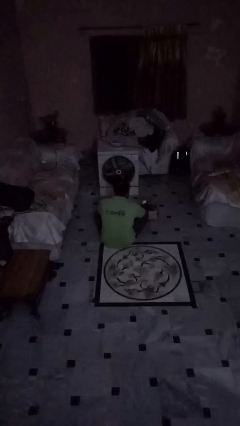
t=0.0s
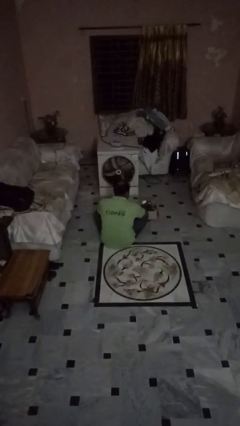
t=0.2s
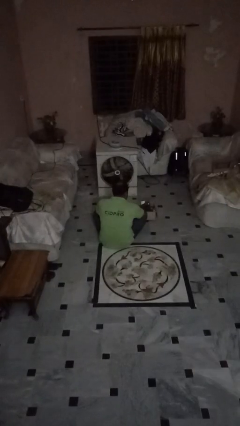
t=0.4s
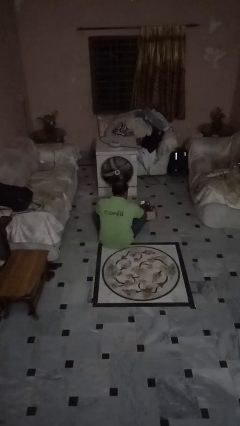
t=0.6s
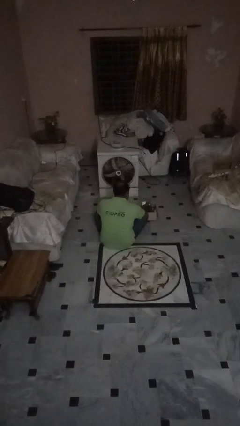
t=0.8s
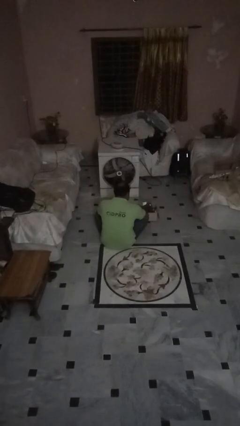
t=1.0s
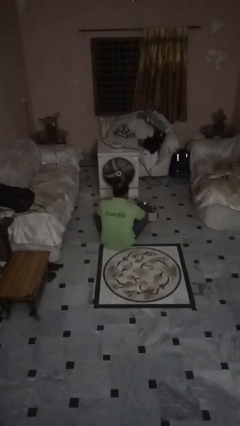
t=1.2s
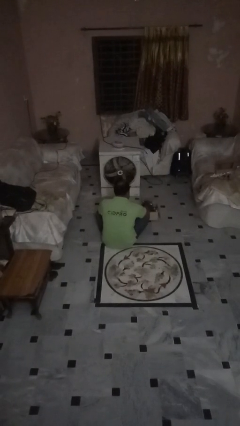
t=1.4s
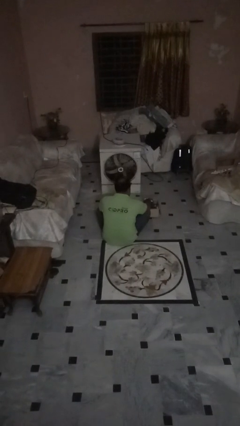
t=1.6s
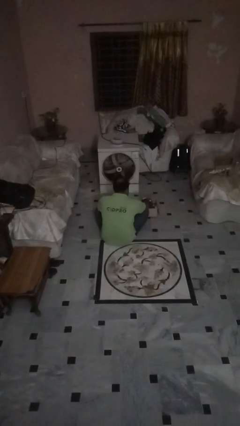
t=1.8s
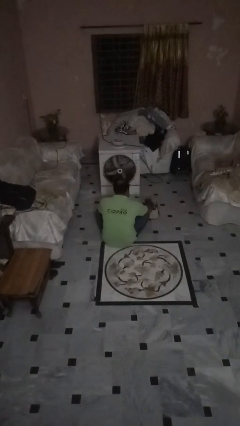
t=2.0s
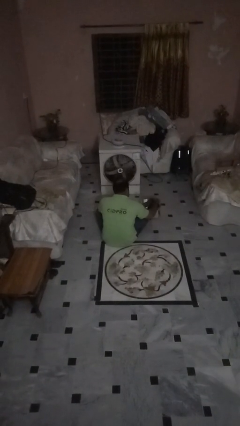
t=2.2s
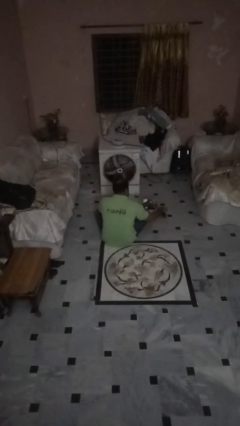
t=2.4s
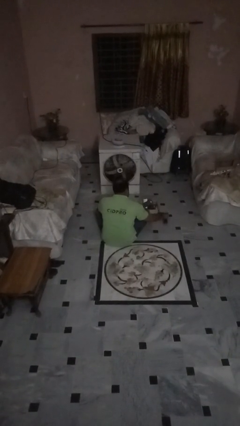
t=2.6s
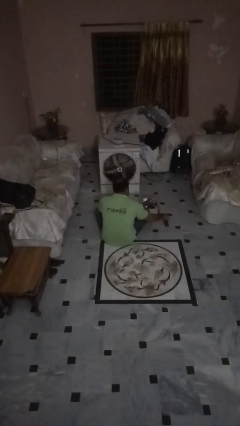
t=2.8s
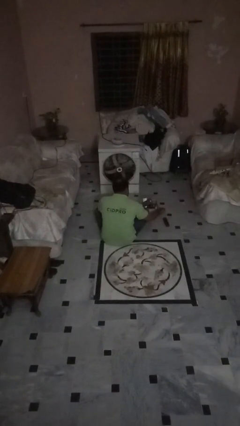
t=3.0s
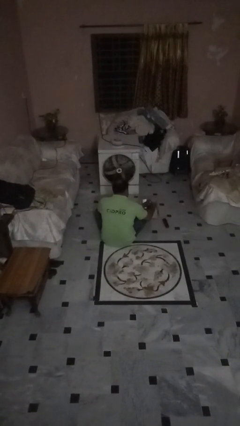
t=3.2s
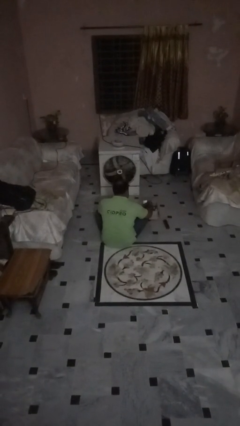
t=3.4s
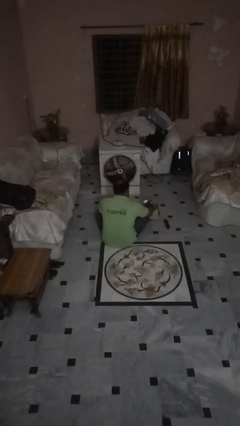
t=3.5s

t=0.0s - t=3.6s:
person unloads box onto floor

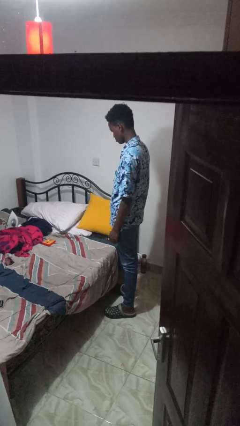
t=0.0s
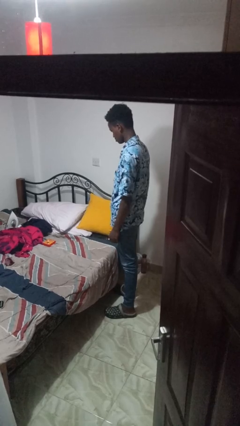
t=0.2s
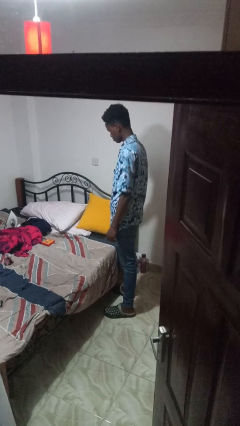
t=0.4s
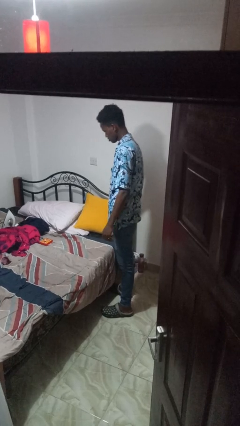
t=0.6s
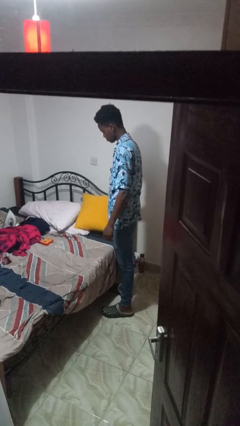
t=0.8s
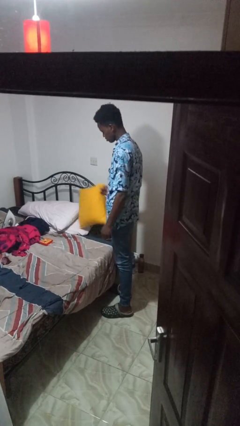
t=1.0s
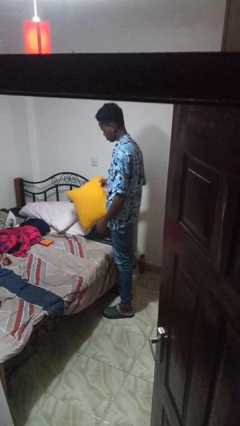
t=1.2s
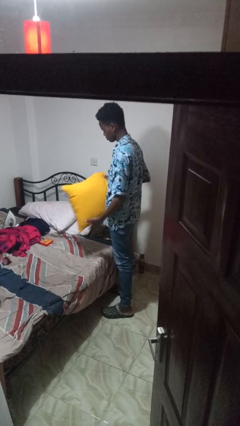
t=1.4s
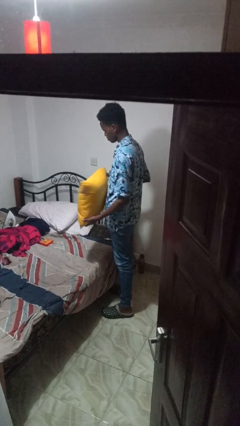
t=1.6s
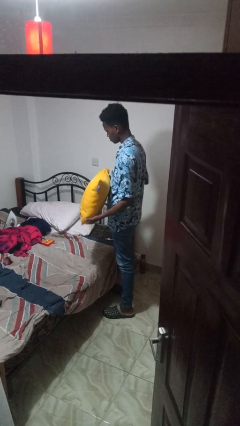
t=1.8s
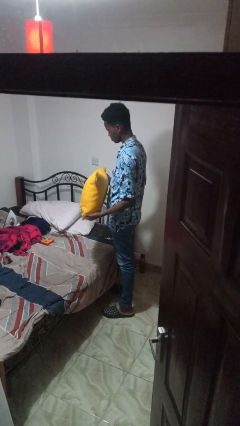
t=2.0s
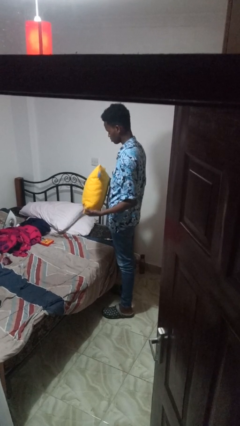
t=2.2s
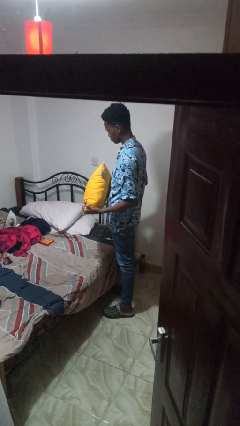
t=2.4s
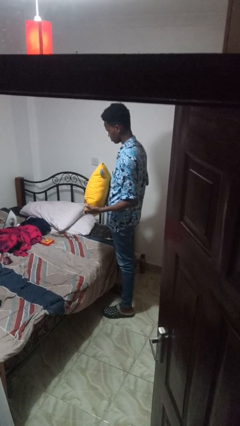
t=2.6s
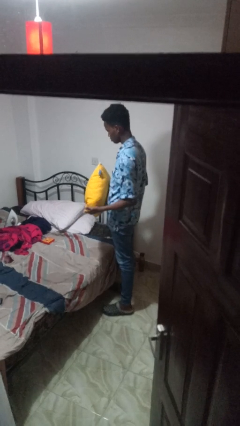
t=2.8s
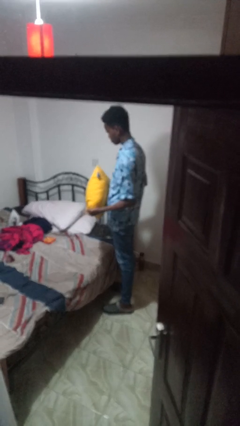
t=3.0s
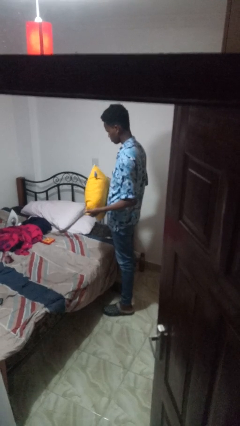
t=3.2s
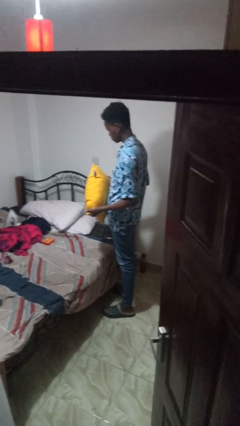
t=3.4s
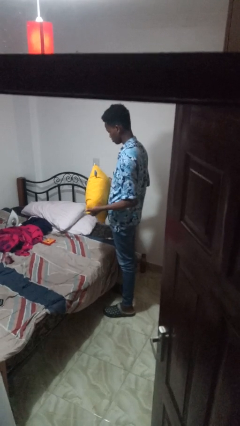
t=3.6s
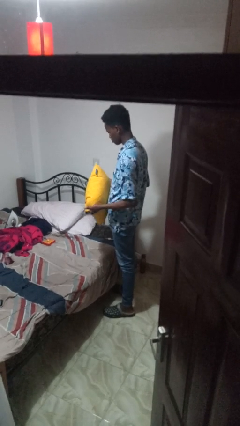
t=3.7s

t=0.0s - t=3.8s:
person picks up object from bed

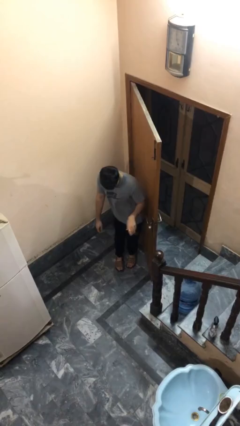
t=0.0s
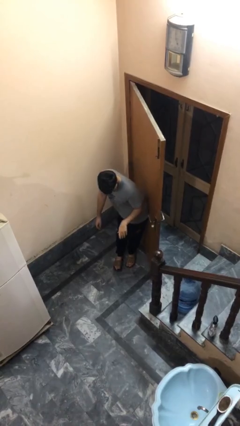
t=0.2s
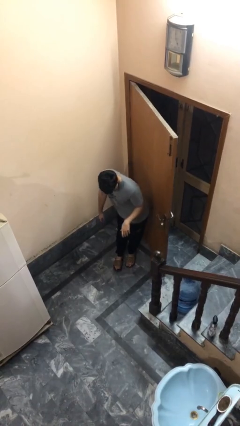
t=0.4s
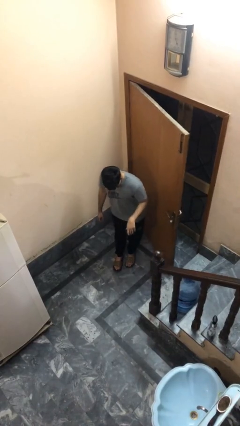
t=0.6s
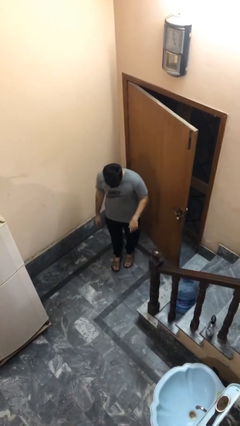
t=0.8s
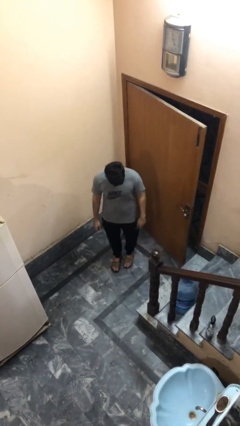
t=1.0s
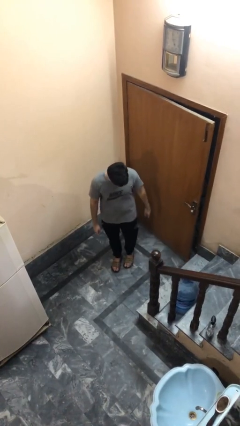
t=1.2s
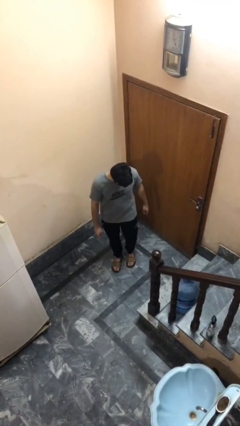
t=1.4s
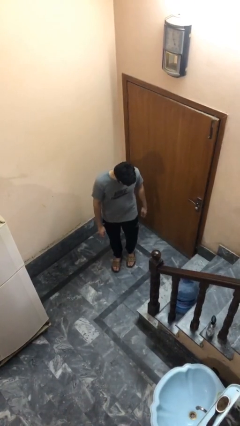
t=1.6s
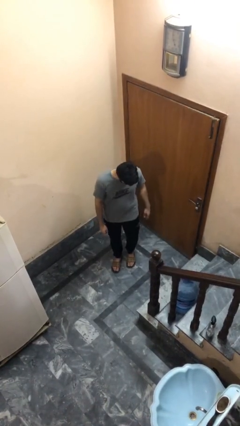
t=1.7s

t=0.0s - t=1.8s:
person closes door with hip

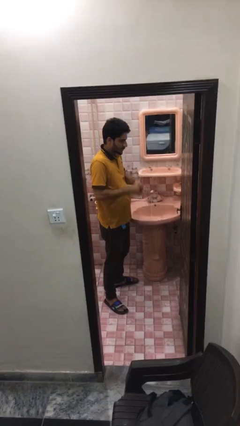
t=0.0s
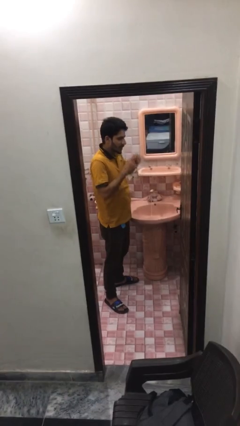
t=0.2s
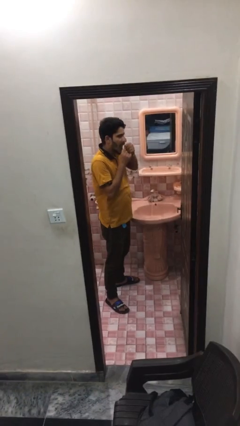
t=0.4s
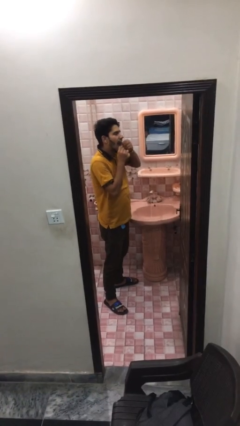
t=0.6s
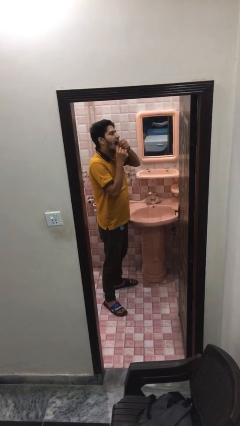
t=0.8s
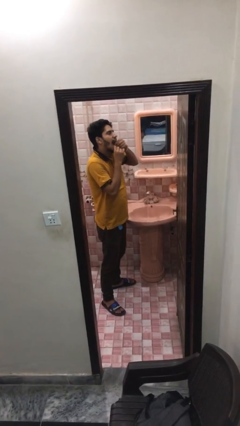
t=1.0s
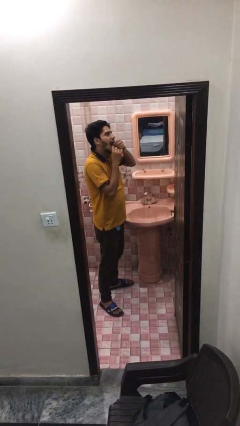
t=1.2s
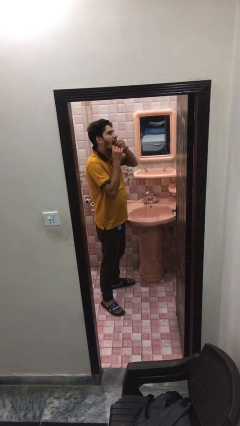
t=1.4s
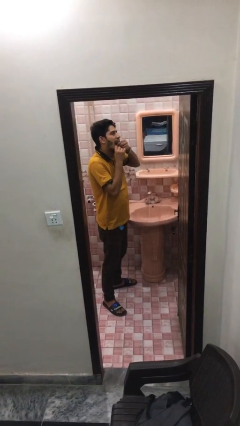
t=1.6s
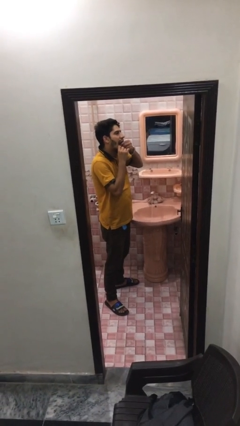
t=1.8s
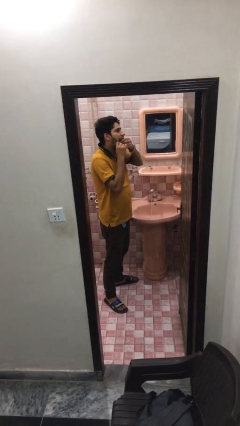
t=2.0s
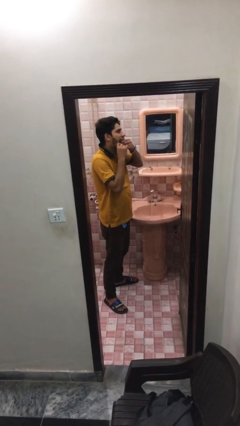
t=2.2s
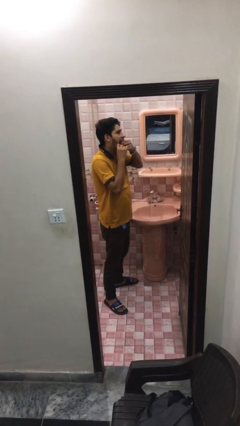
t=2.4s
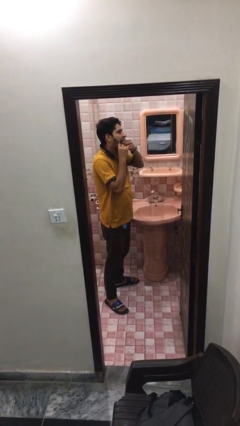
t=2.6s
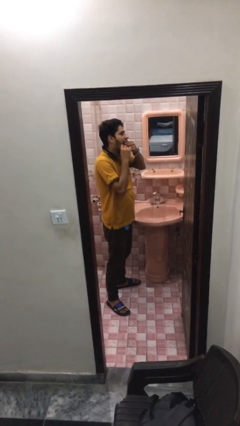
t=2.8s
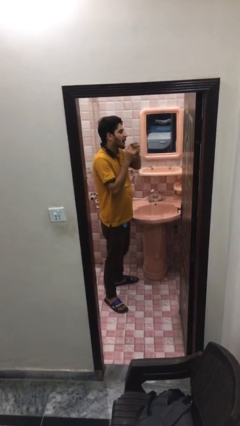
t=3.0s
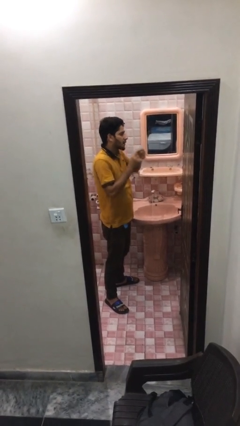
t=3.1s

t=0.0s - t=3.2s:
person flosses

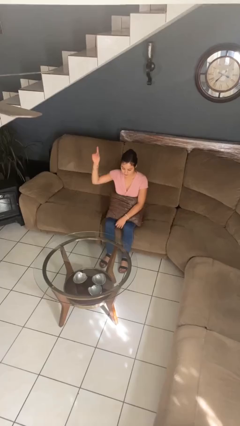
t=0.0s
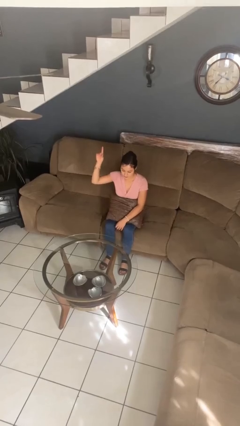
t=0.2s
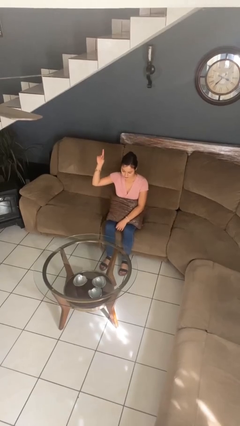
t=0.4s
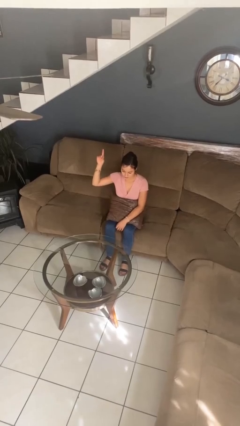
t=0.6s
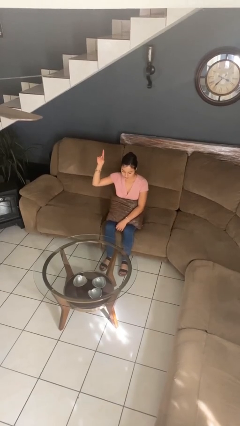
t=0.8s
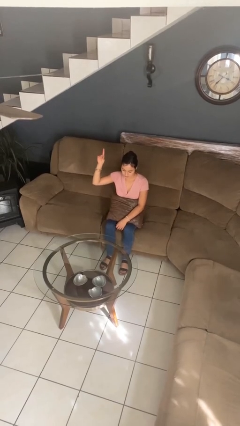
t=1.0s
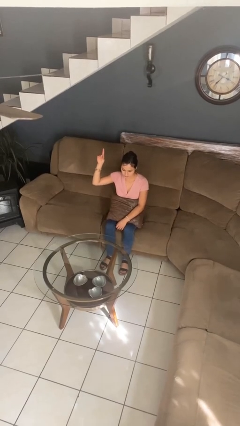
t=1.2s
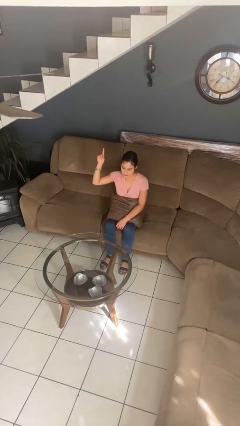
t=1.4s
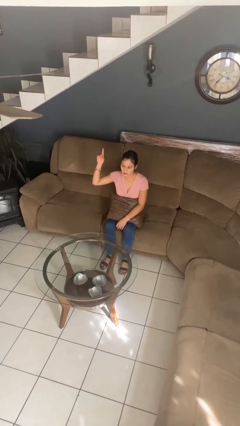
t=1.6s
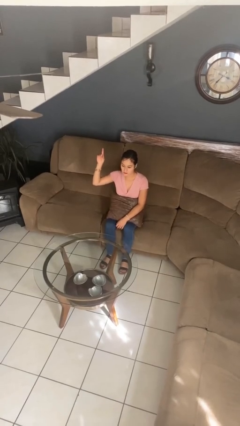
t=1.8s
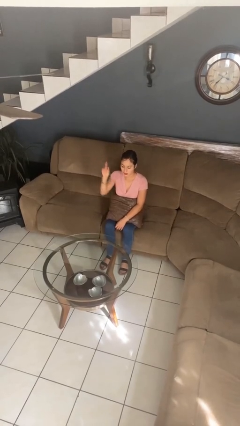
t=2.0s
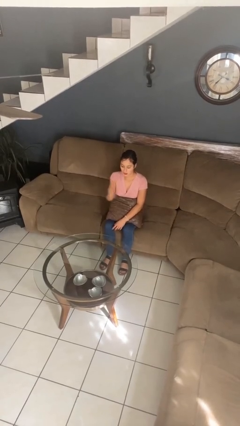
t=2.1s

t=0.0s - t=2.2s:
person gestures number one

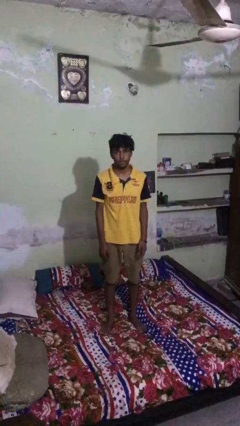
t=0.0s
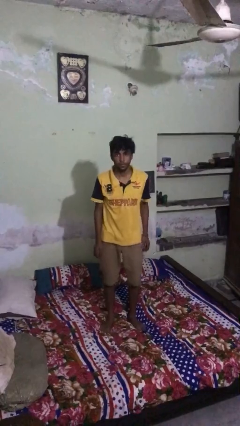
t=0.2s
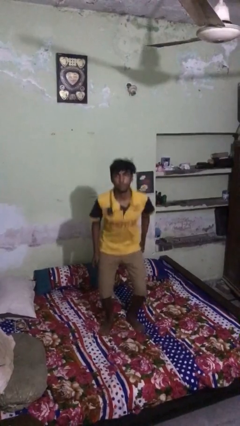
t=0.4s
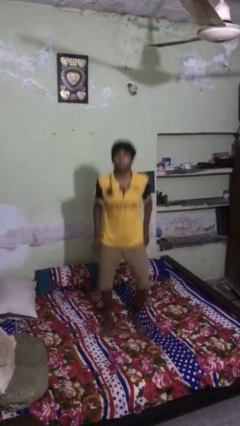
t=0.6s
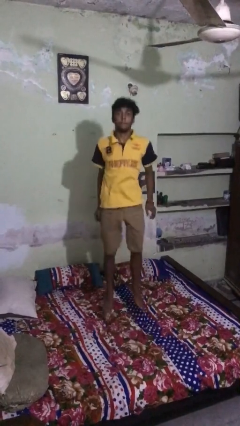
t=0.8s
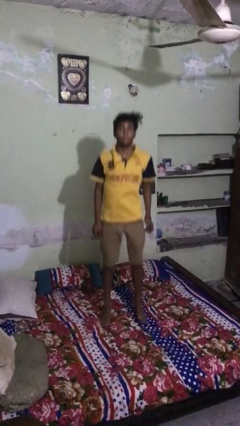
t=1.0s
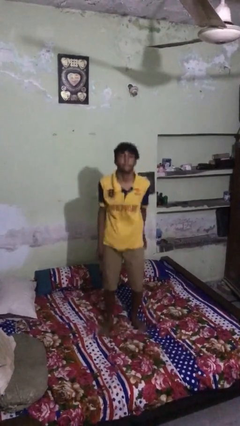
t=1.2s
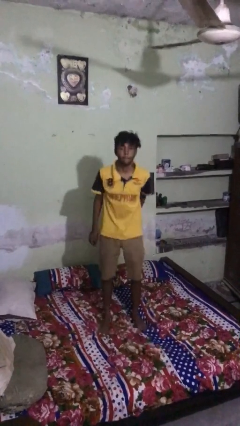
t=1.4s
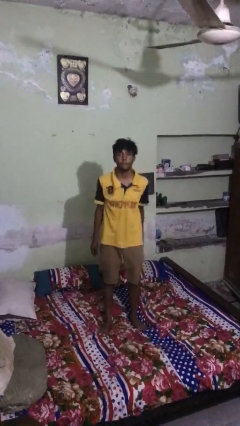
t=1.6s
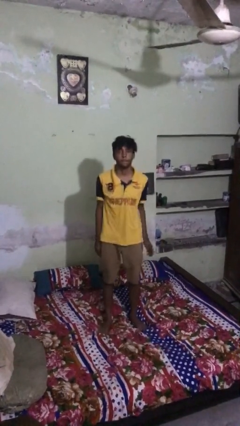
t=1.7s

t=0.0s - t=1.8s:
person jumps on bed

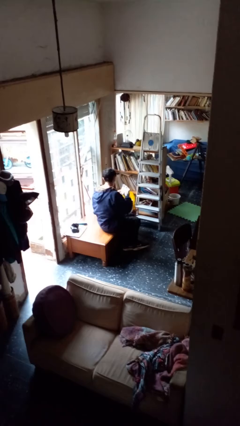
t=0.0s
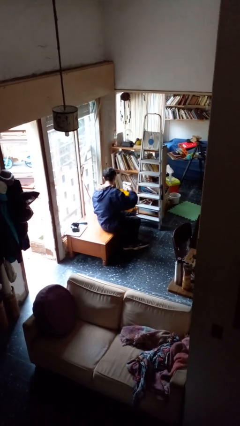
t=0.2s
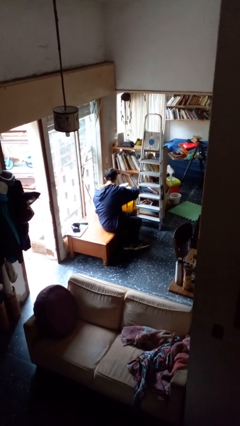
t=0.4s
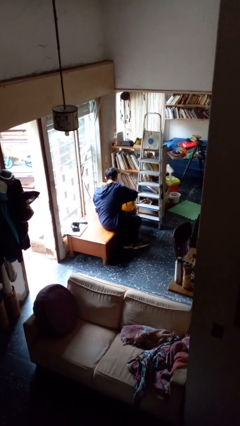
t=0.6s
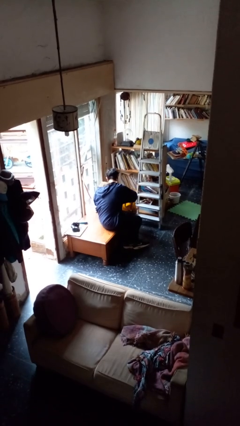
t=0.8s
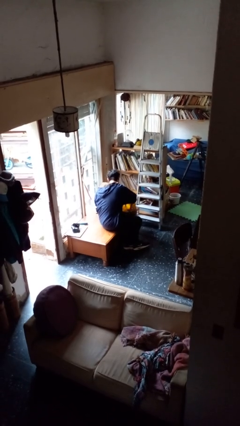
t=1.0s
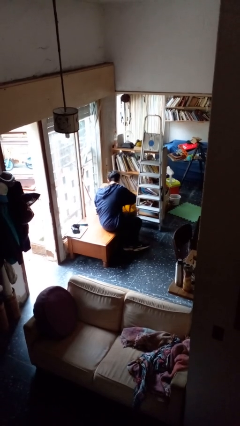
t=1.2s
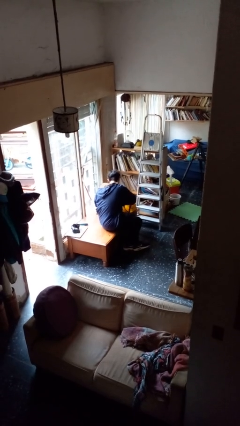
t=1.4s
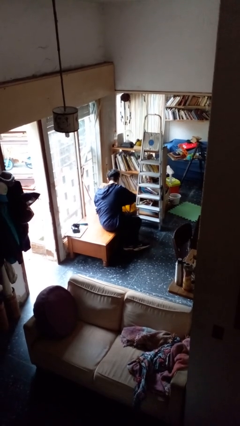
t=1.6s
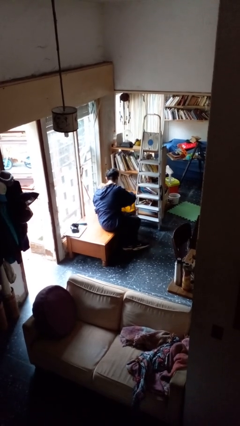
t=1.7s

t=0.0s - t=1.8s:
person puts object into bag
